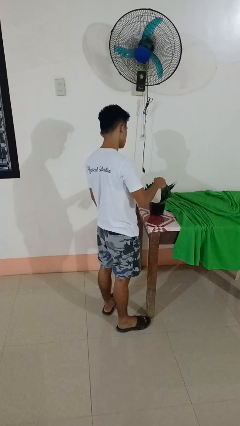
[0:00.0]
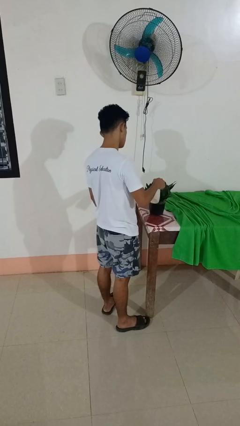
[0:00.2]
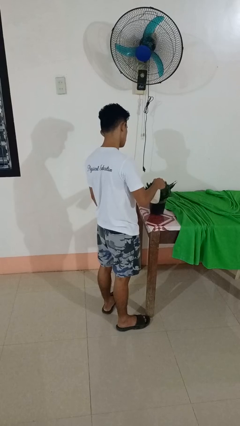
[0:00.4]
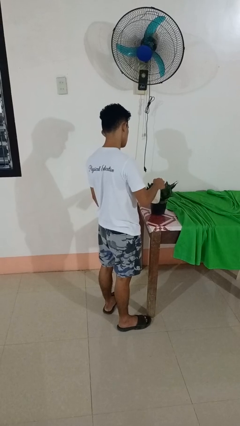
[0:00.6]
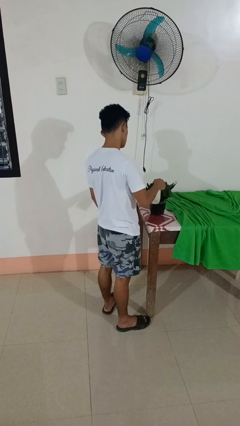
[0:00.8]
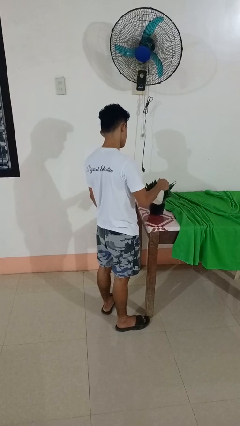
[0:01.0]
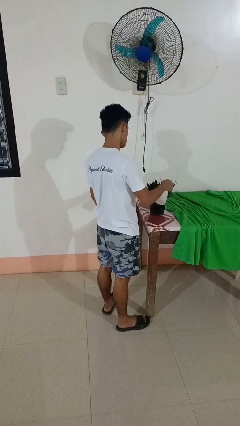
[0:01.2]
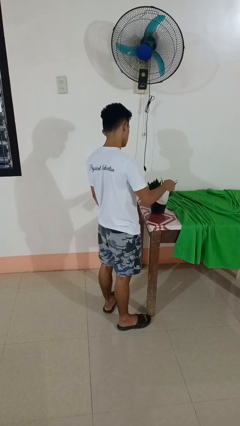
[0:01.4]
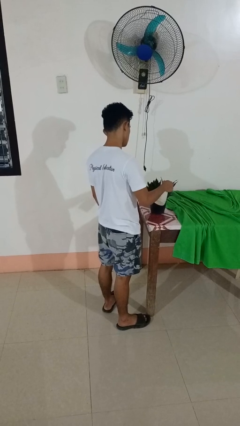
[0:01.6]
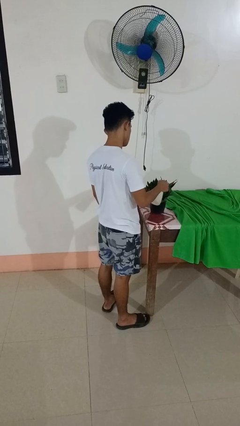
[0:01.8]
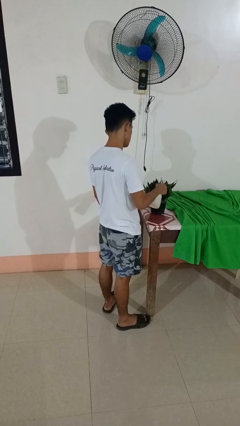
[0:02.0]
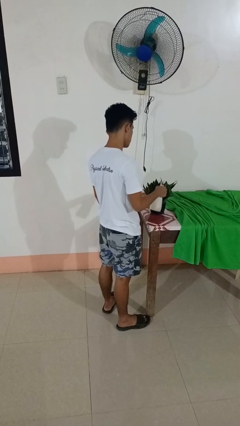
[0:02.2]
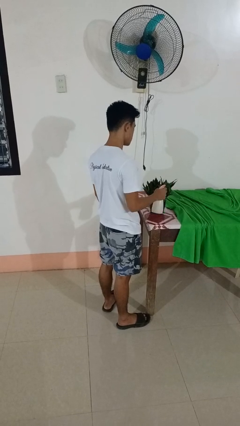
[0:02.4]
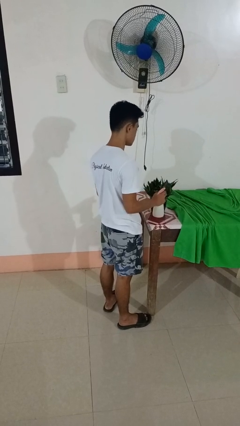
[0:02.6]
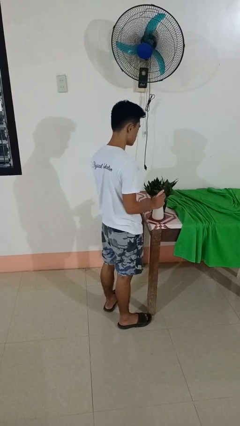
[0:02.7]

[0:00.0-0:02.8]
person waters houseplant

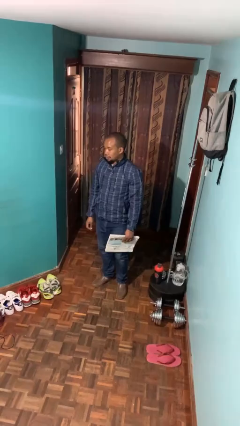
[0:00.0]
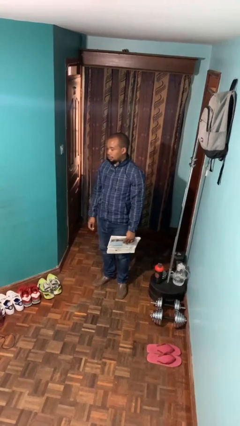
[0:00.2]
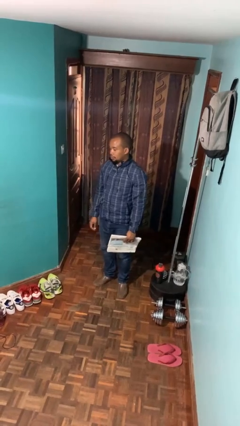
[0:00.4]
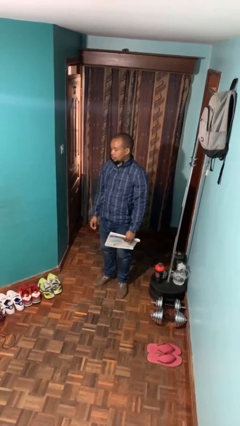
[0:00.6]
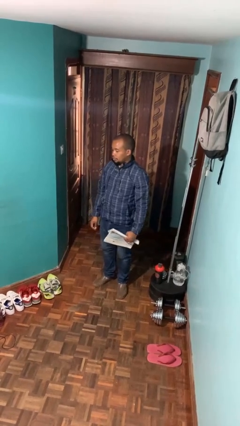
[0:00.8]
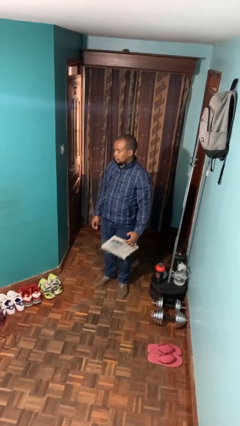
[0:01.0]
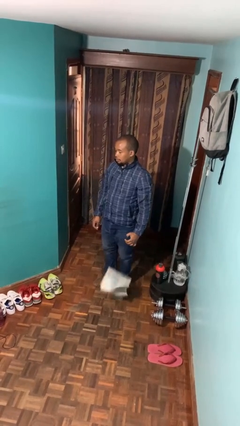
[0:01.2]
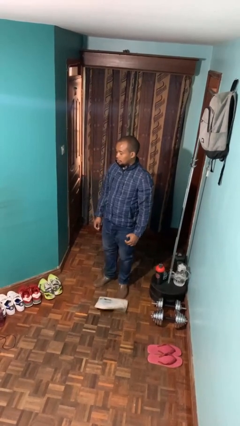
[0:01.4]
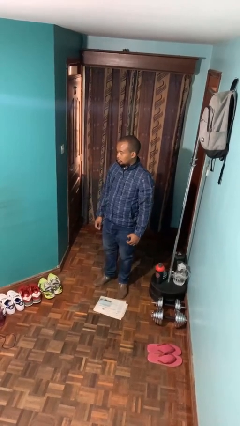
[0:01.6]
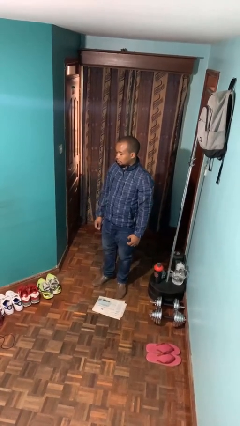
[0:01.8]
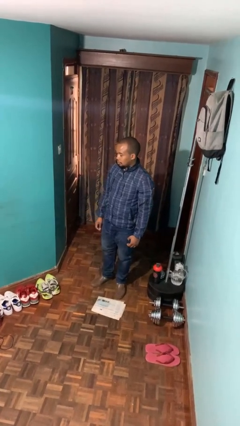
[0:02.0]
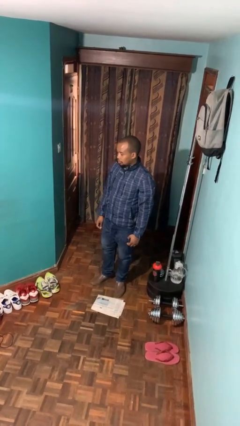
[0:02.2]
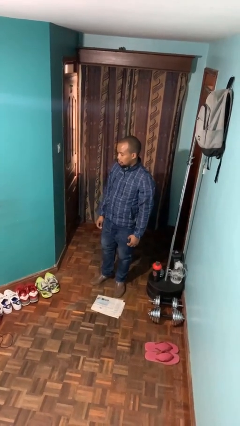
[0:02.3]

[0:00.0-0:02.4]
person drops object

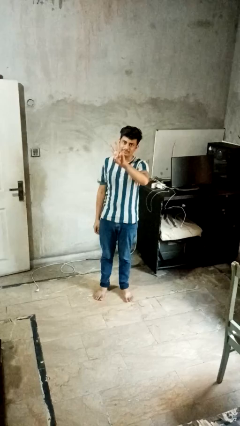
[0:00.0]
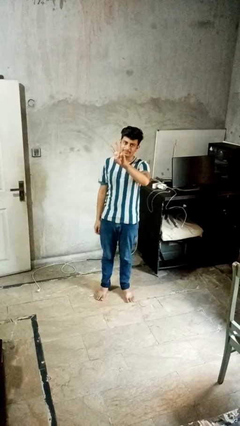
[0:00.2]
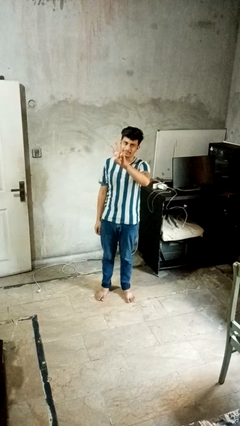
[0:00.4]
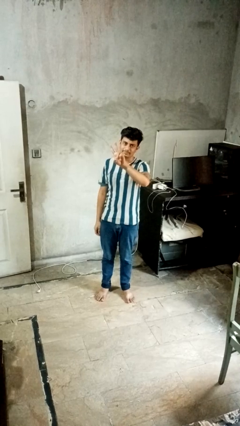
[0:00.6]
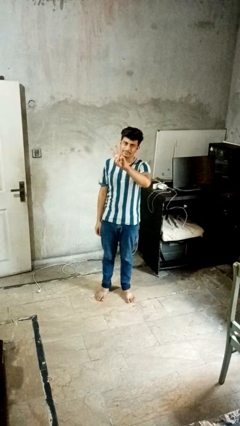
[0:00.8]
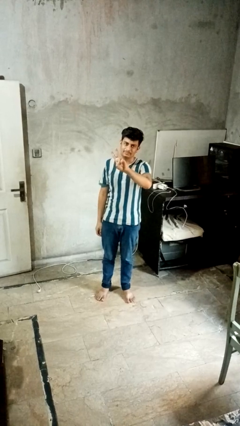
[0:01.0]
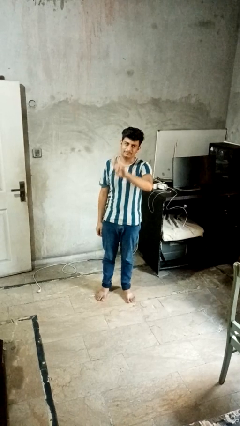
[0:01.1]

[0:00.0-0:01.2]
person gestures peace

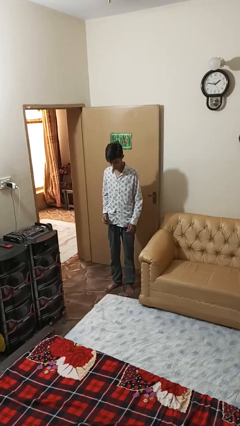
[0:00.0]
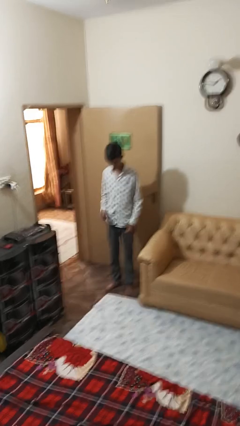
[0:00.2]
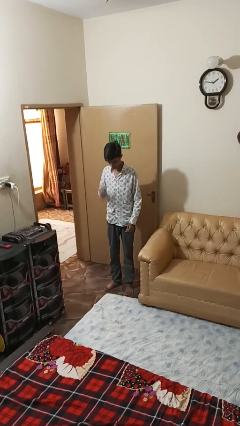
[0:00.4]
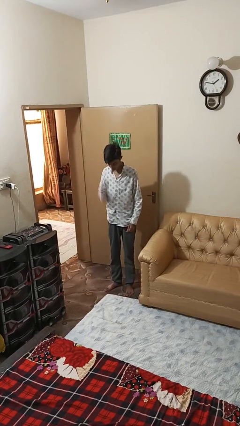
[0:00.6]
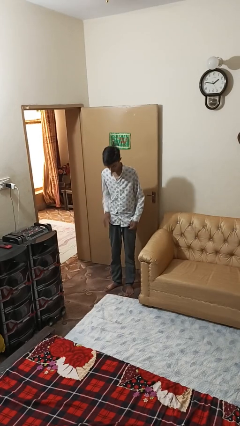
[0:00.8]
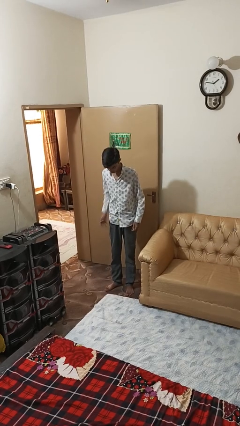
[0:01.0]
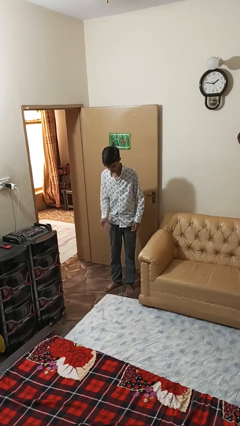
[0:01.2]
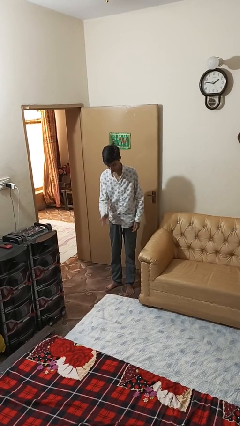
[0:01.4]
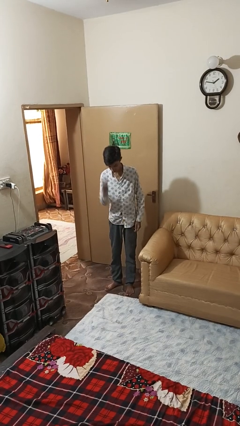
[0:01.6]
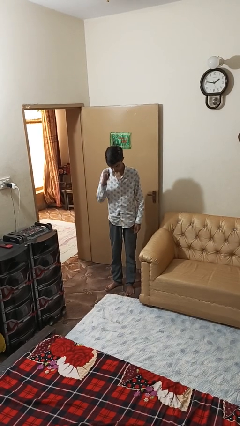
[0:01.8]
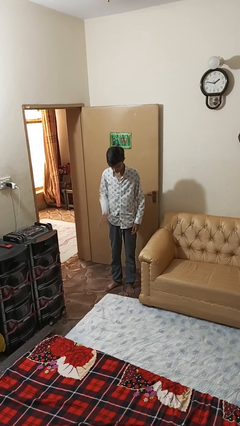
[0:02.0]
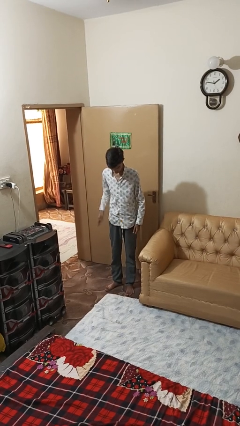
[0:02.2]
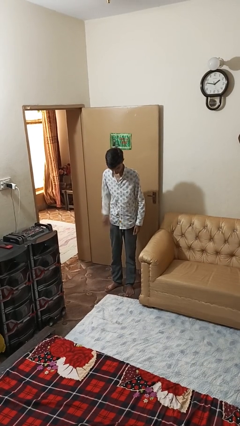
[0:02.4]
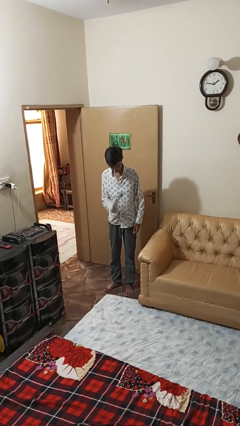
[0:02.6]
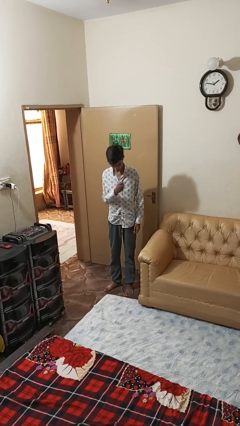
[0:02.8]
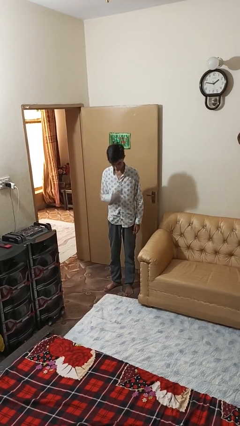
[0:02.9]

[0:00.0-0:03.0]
person bounces ball on floor

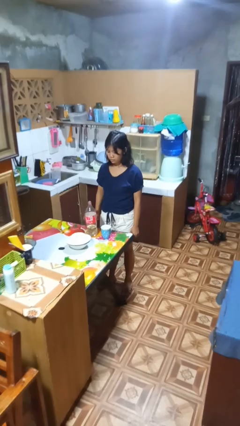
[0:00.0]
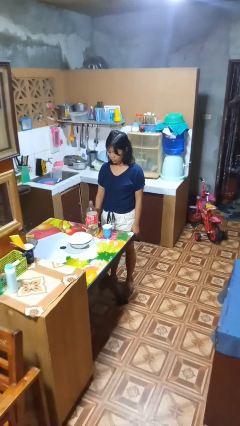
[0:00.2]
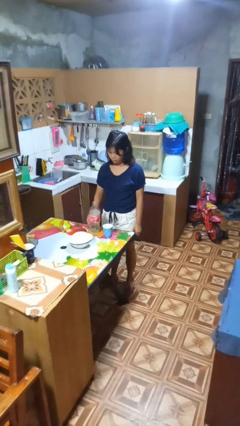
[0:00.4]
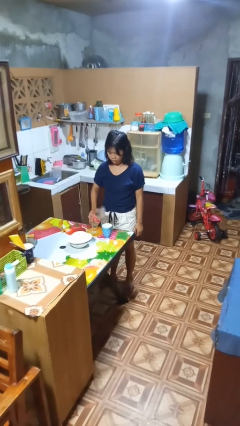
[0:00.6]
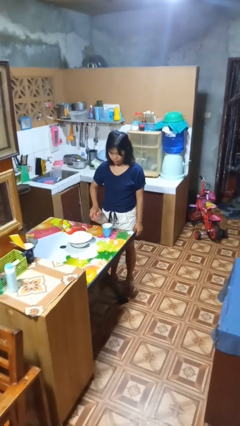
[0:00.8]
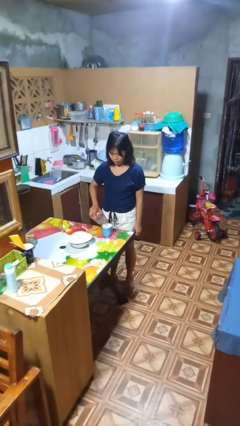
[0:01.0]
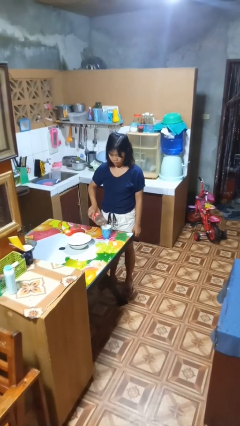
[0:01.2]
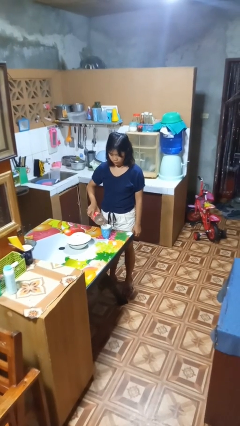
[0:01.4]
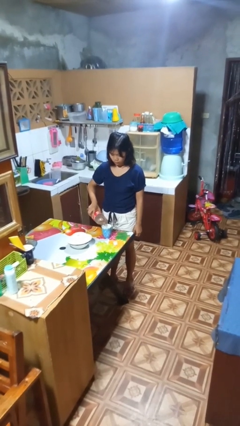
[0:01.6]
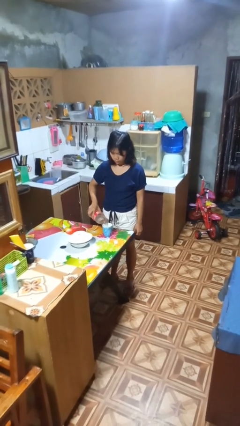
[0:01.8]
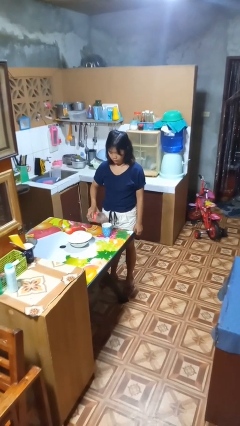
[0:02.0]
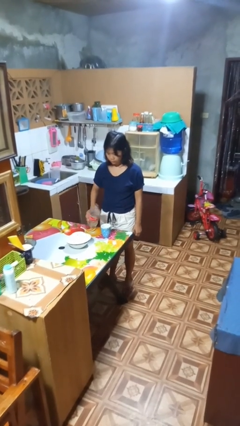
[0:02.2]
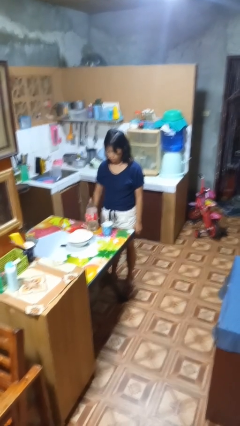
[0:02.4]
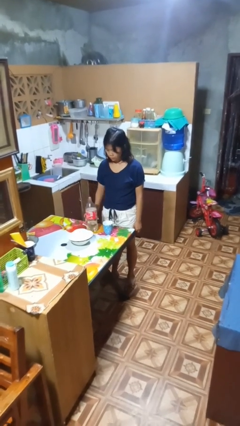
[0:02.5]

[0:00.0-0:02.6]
person pours liquid into cup

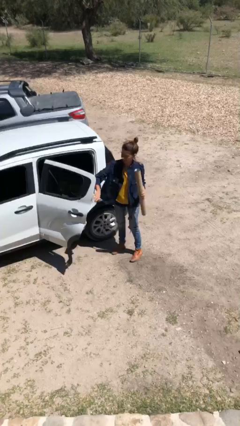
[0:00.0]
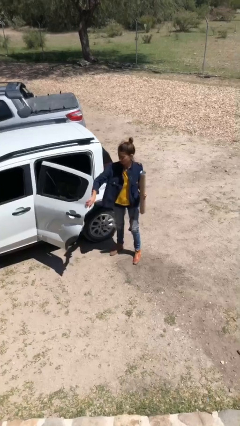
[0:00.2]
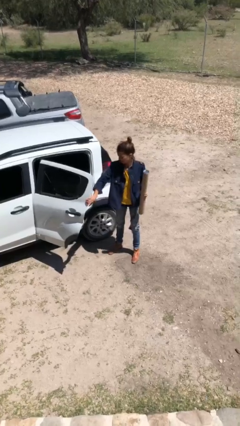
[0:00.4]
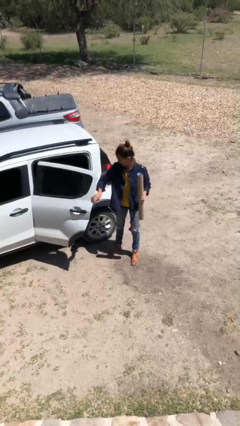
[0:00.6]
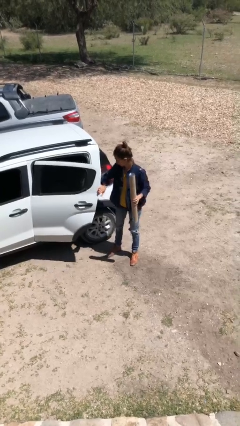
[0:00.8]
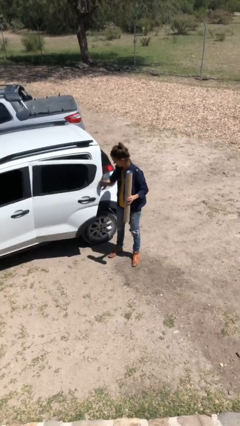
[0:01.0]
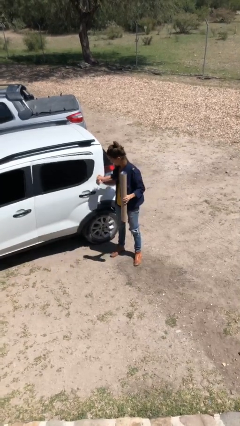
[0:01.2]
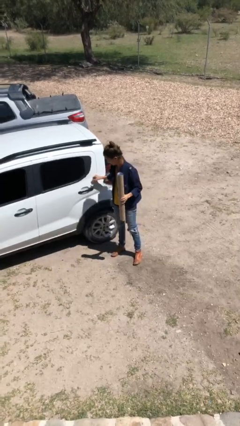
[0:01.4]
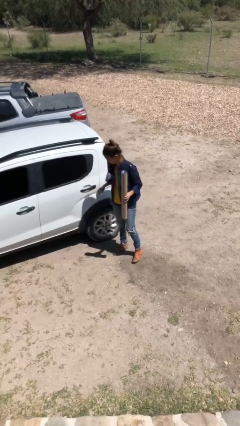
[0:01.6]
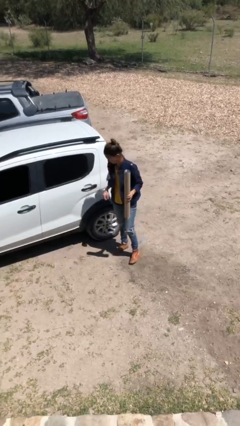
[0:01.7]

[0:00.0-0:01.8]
person closes car door

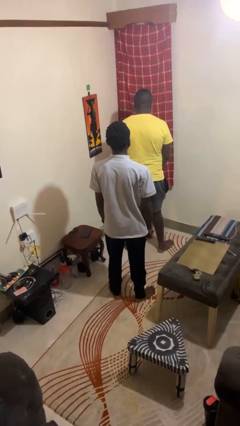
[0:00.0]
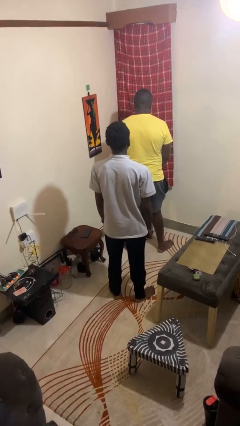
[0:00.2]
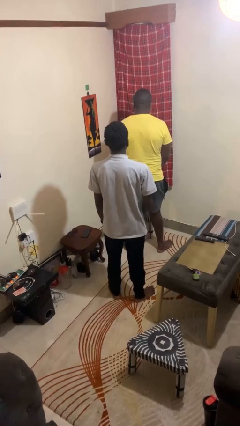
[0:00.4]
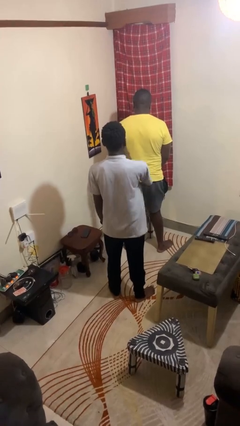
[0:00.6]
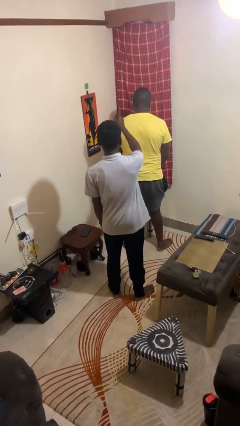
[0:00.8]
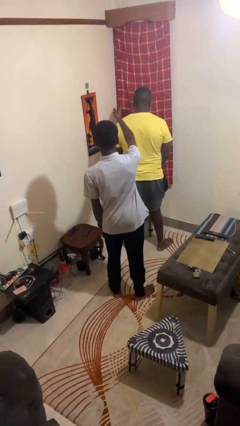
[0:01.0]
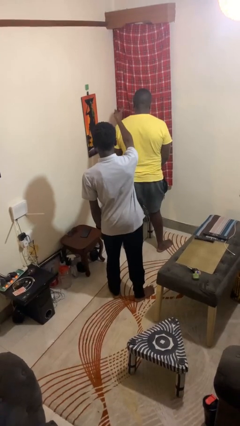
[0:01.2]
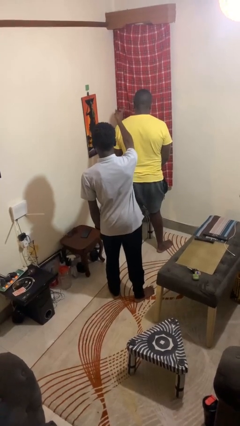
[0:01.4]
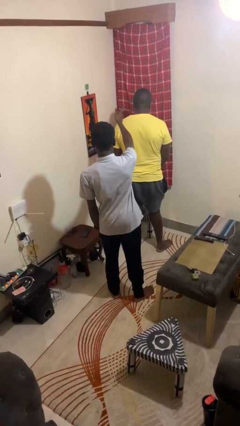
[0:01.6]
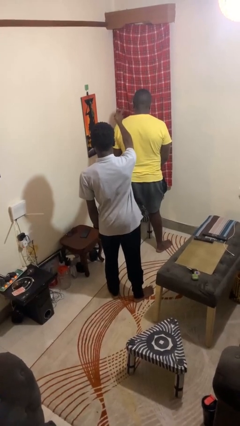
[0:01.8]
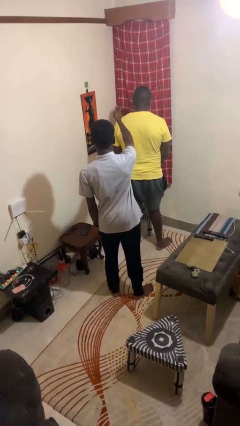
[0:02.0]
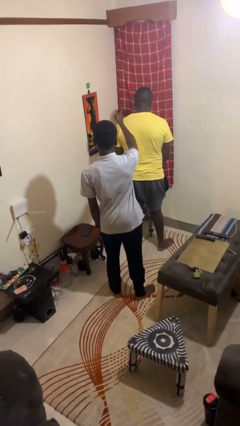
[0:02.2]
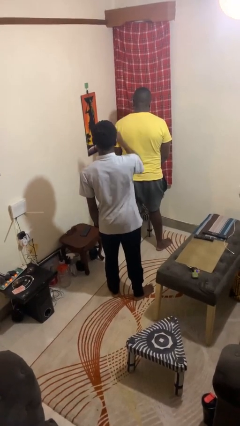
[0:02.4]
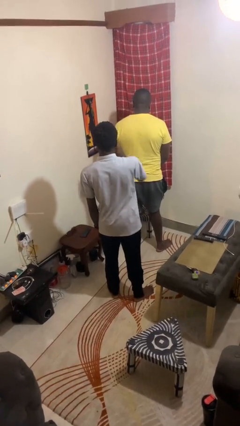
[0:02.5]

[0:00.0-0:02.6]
person points at person

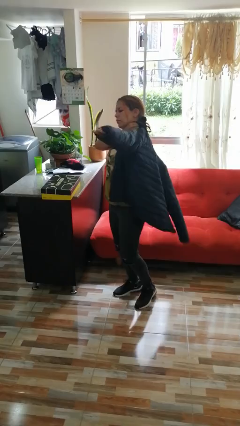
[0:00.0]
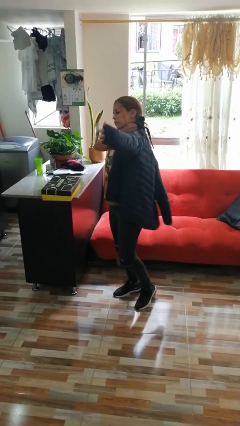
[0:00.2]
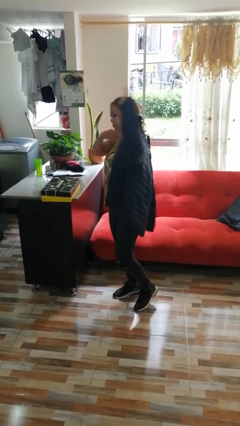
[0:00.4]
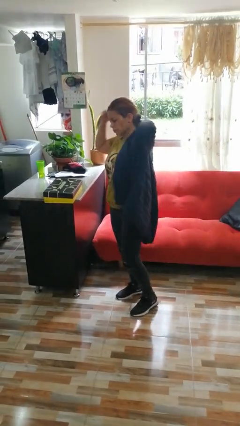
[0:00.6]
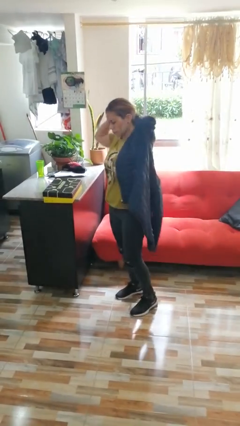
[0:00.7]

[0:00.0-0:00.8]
person takes off jacket
